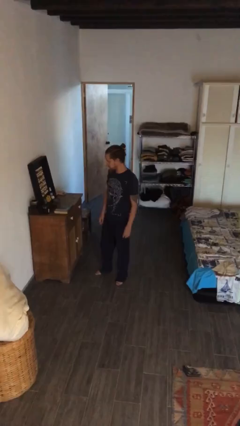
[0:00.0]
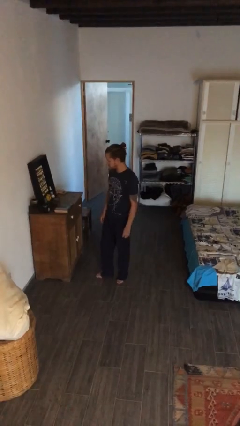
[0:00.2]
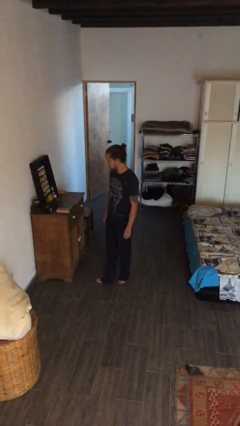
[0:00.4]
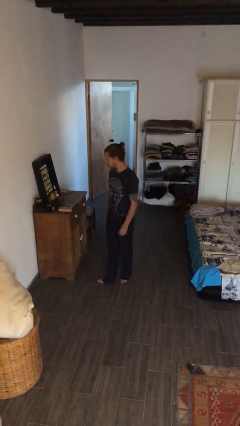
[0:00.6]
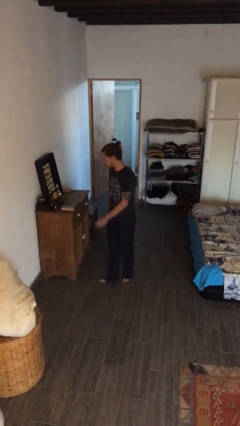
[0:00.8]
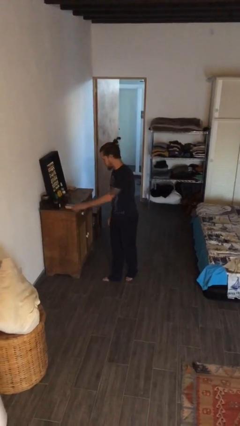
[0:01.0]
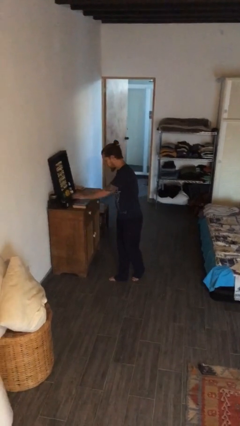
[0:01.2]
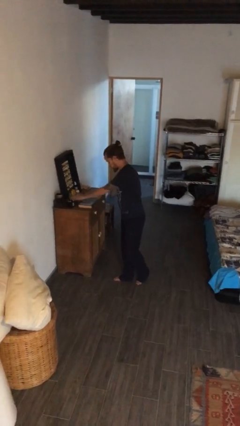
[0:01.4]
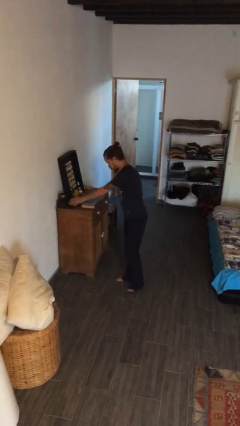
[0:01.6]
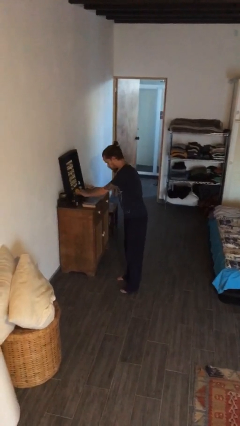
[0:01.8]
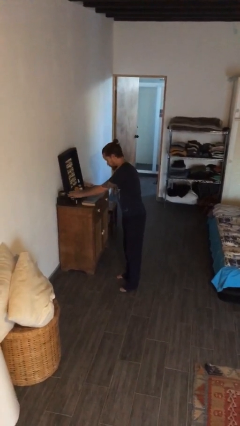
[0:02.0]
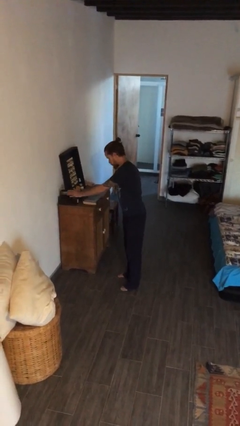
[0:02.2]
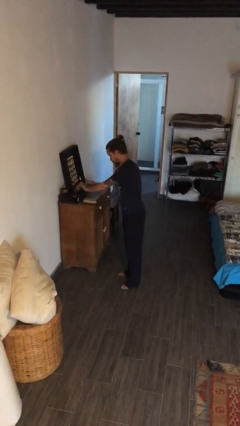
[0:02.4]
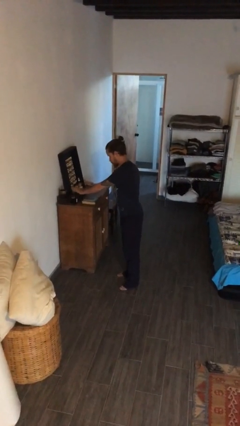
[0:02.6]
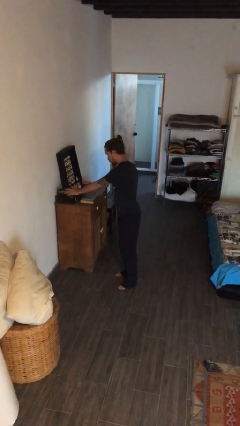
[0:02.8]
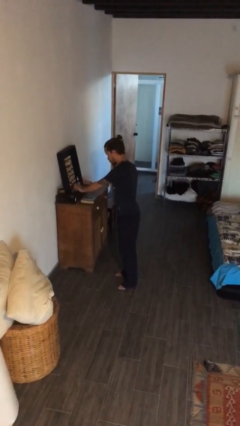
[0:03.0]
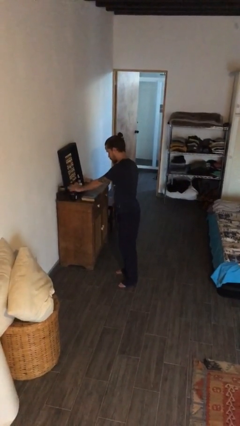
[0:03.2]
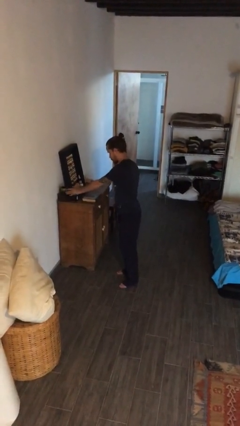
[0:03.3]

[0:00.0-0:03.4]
person waves hand over object

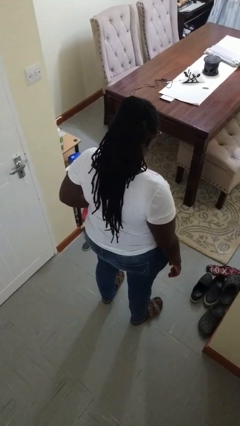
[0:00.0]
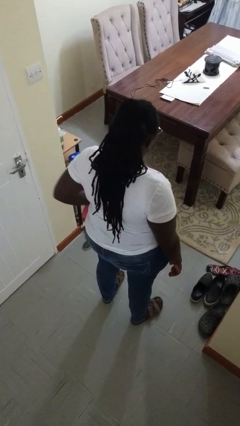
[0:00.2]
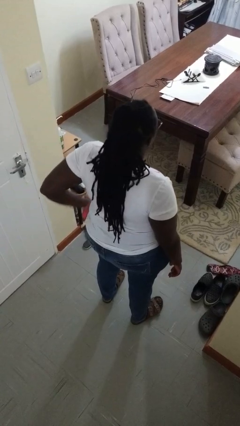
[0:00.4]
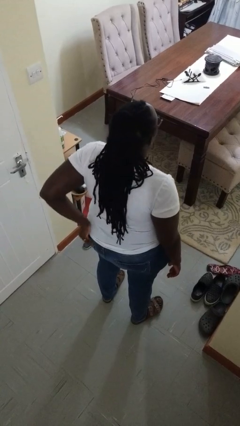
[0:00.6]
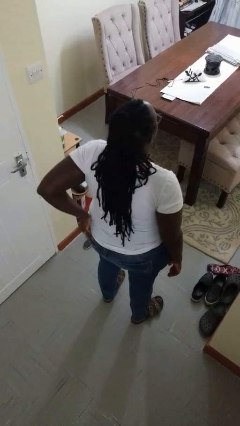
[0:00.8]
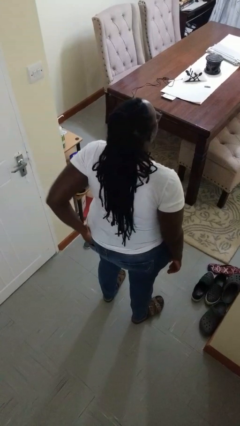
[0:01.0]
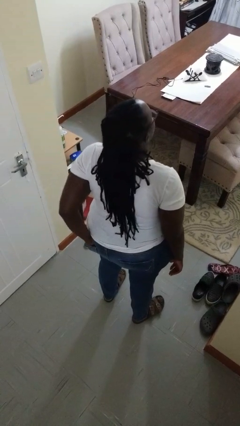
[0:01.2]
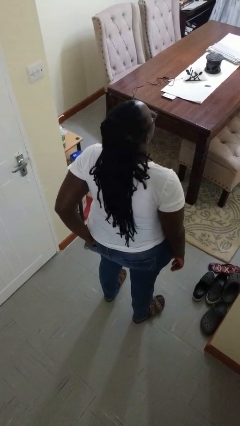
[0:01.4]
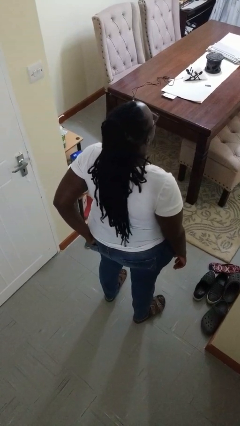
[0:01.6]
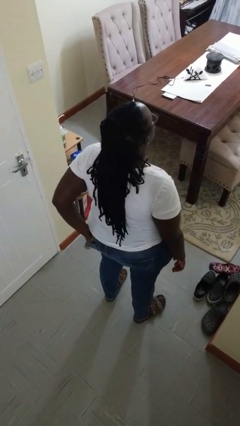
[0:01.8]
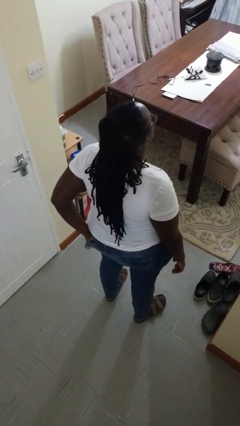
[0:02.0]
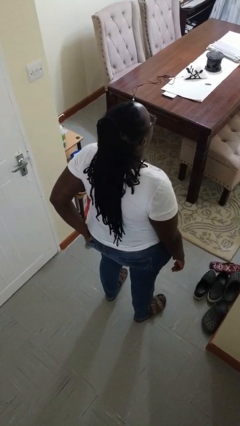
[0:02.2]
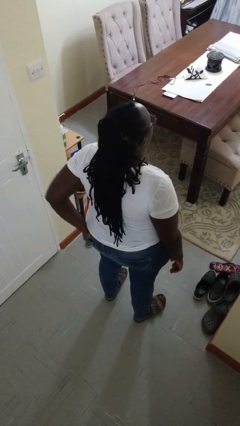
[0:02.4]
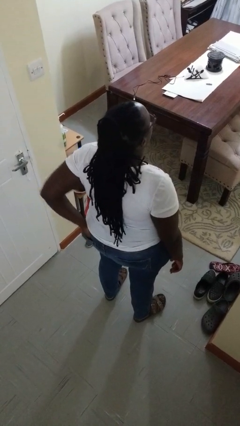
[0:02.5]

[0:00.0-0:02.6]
person puts hands in back pockets

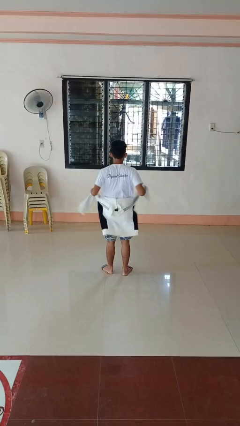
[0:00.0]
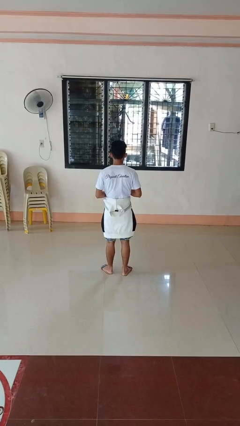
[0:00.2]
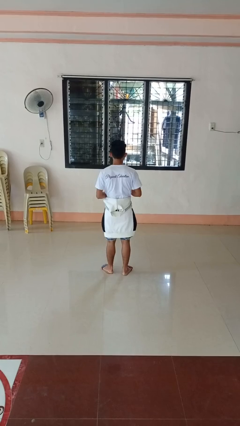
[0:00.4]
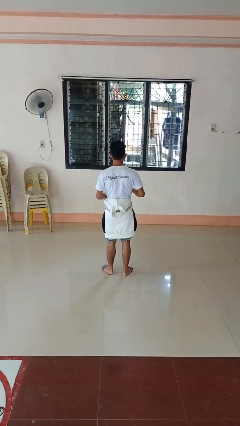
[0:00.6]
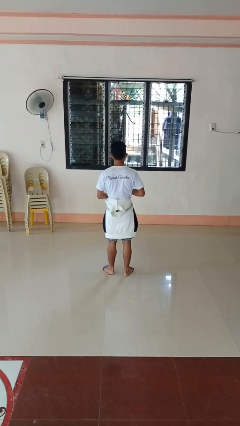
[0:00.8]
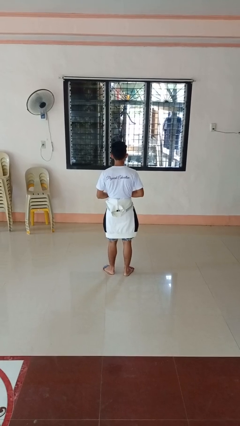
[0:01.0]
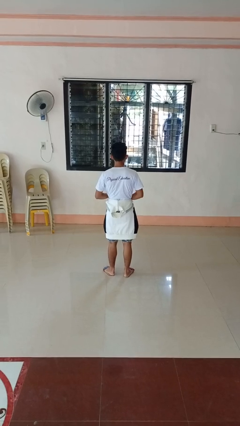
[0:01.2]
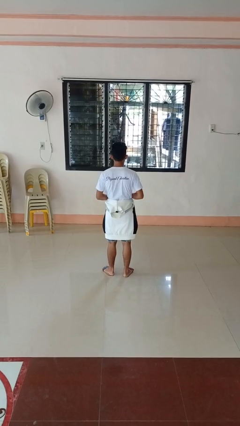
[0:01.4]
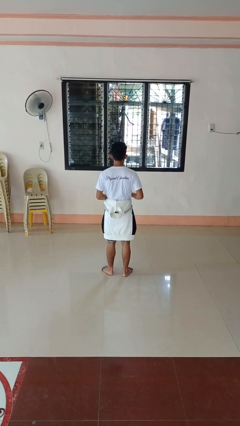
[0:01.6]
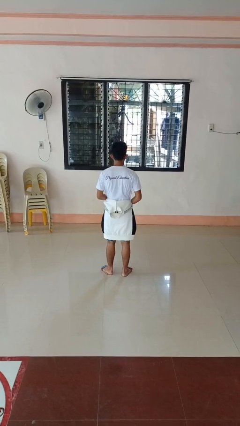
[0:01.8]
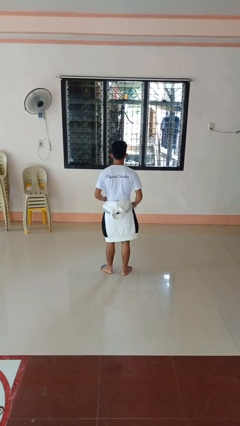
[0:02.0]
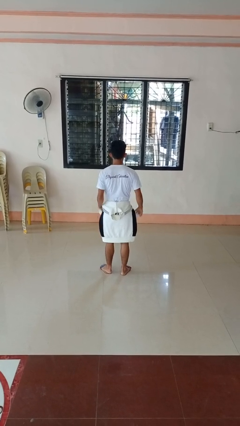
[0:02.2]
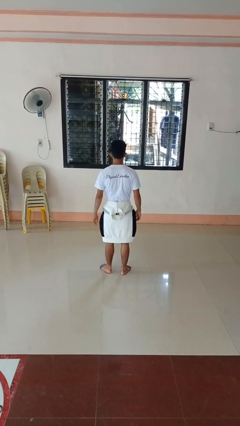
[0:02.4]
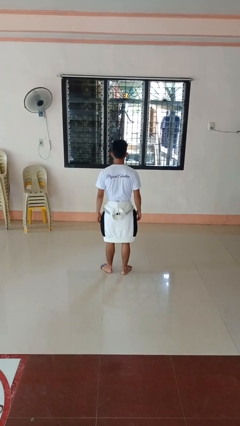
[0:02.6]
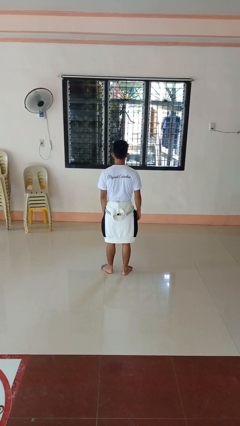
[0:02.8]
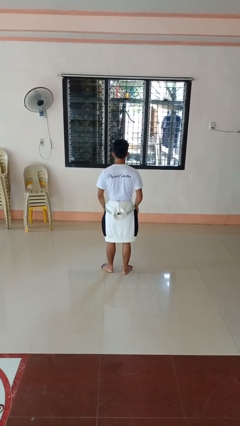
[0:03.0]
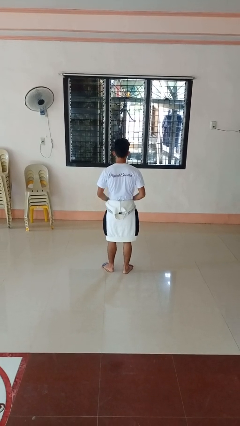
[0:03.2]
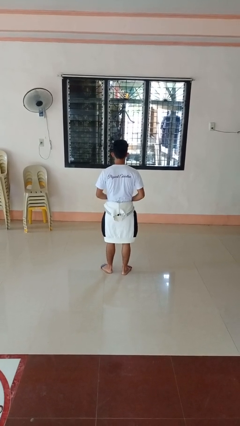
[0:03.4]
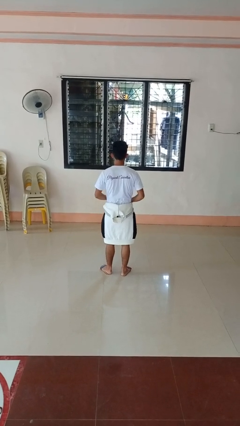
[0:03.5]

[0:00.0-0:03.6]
person ties jacket around waist

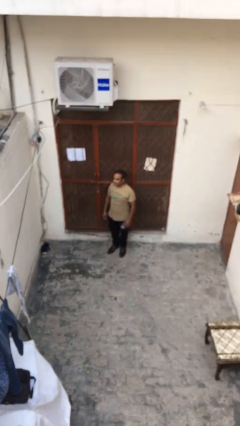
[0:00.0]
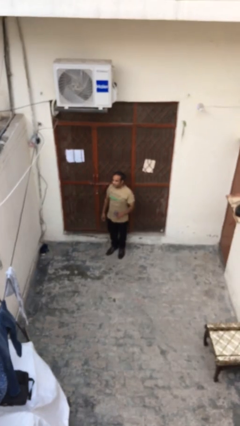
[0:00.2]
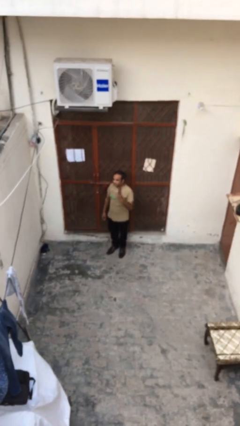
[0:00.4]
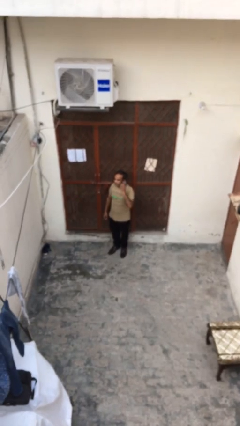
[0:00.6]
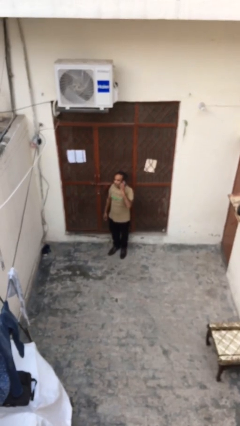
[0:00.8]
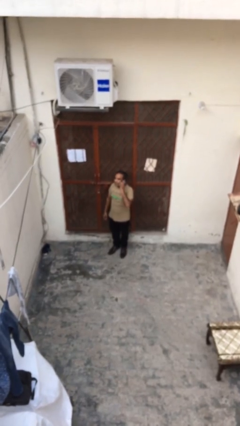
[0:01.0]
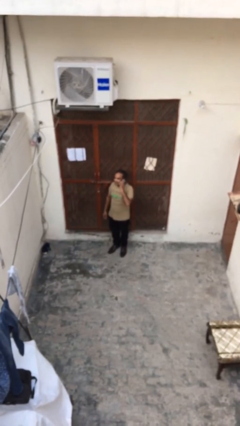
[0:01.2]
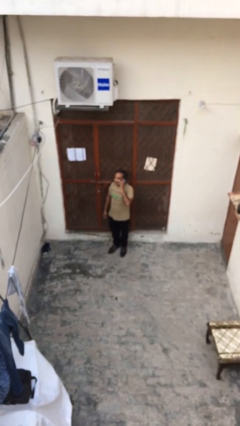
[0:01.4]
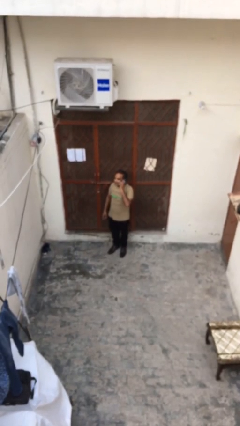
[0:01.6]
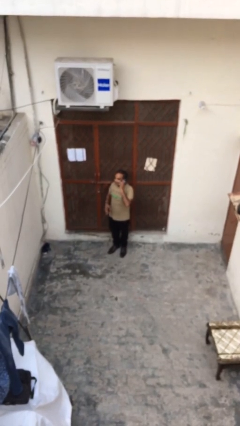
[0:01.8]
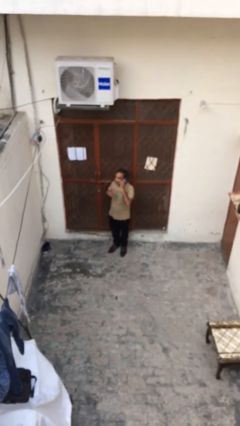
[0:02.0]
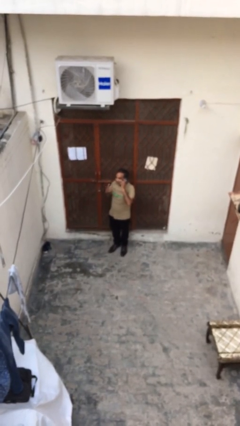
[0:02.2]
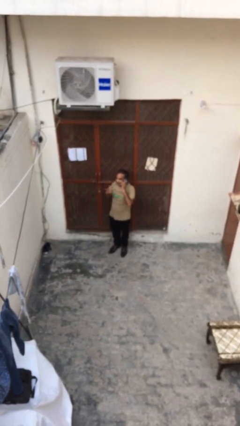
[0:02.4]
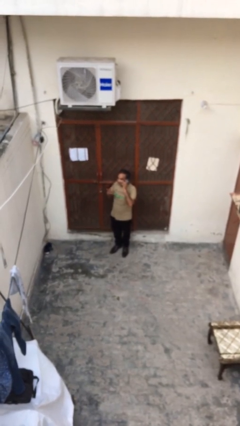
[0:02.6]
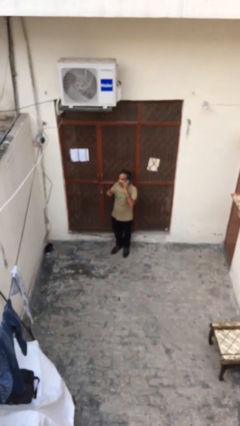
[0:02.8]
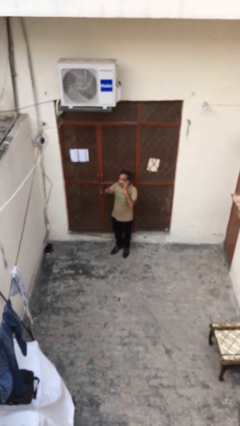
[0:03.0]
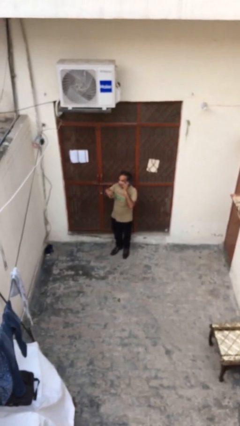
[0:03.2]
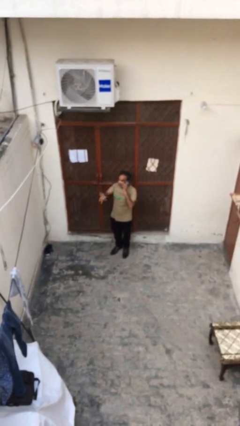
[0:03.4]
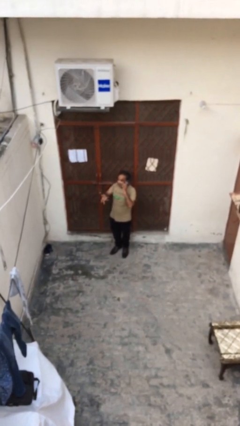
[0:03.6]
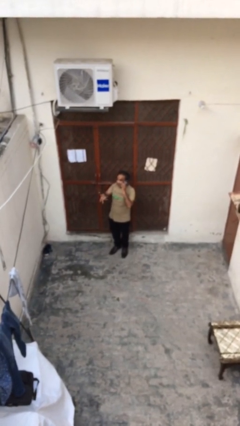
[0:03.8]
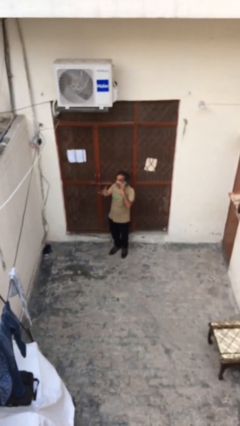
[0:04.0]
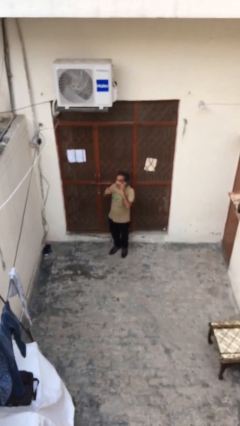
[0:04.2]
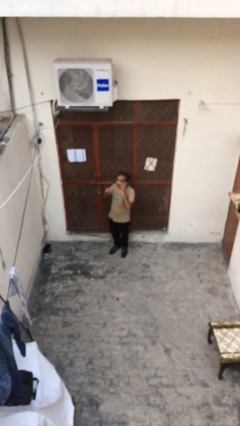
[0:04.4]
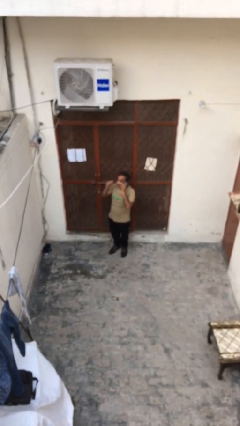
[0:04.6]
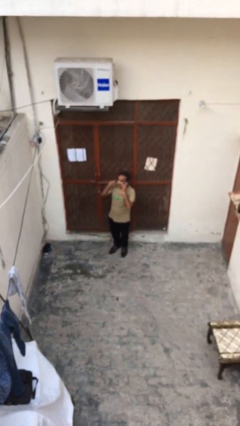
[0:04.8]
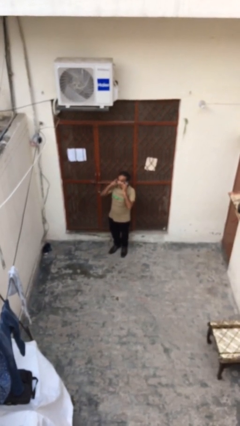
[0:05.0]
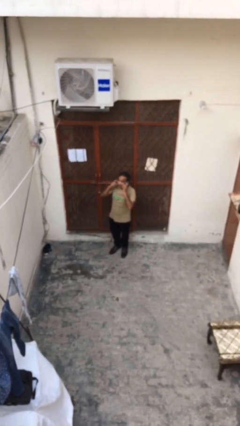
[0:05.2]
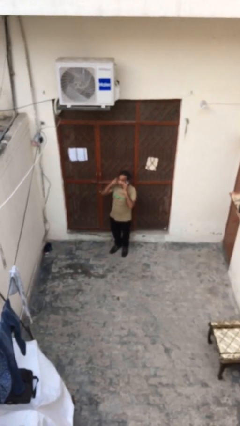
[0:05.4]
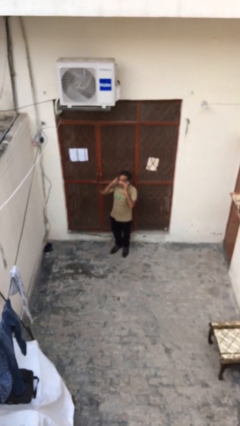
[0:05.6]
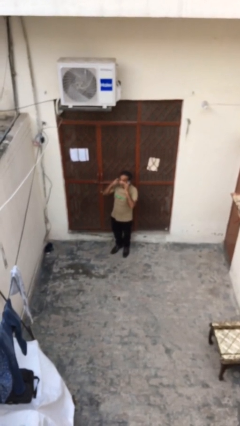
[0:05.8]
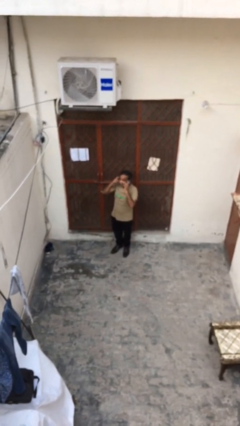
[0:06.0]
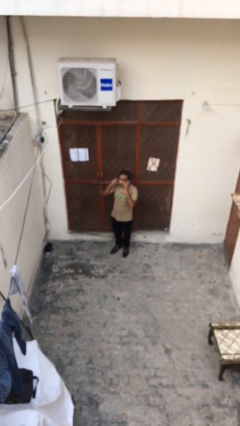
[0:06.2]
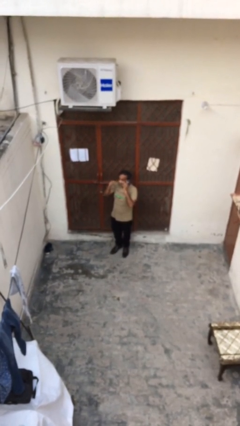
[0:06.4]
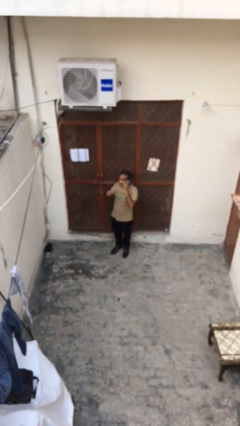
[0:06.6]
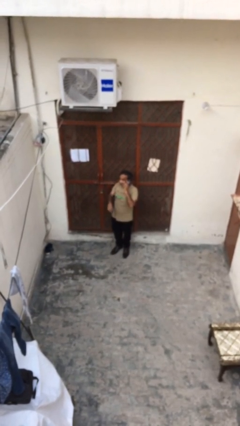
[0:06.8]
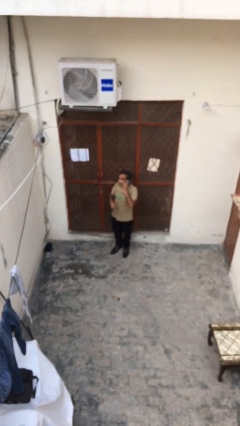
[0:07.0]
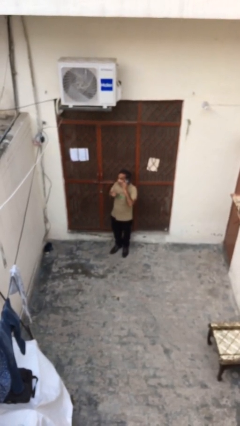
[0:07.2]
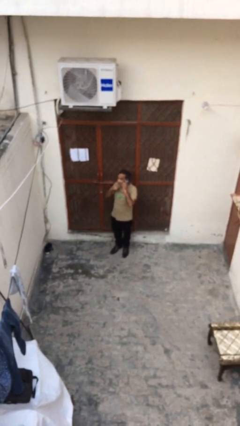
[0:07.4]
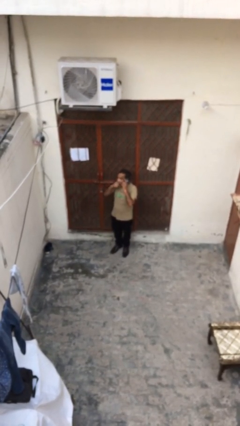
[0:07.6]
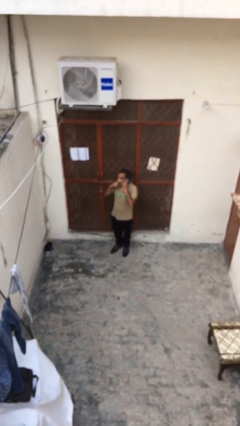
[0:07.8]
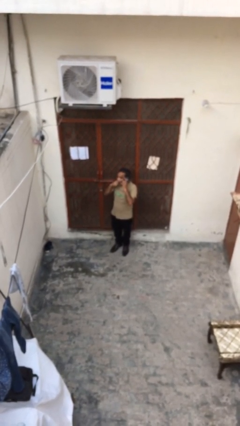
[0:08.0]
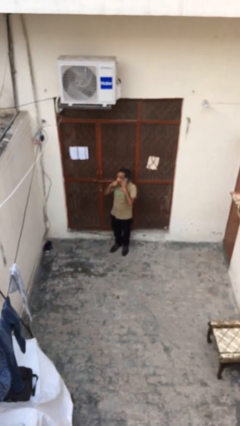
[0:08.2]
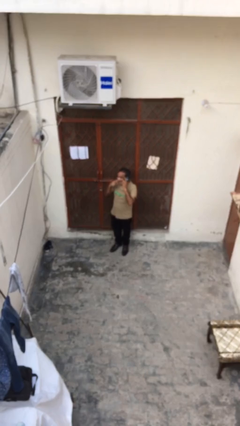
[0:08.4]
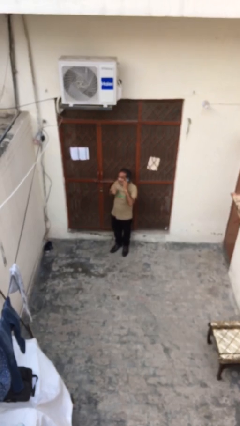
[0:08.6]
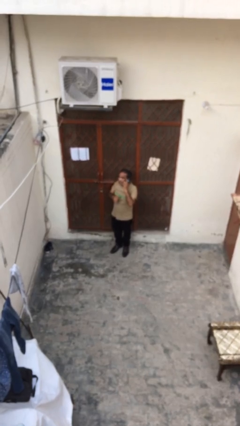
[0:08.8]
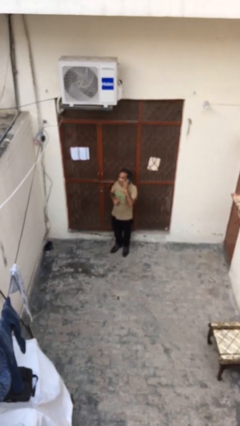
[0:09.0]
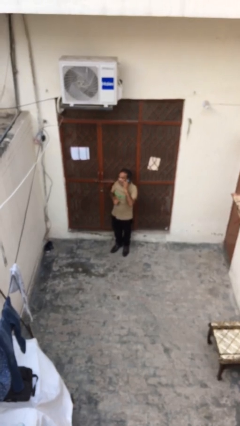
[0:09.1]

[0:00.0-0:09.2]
person talks on phone
